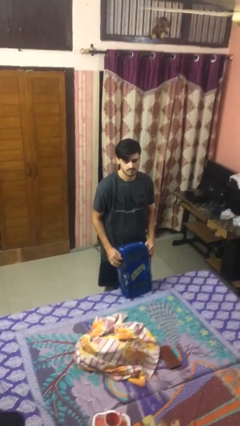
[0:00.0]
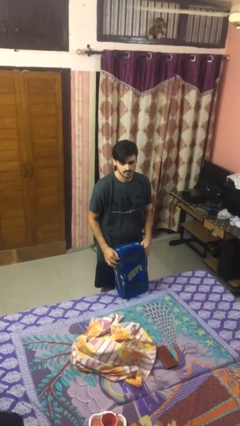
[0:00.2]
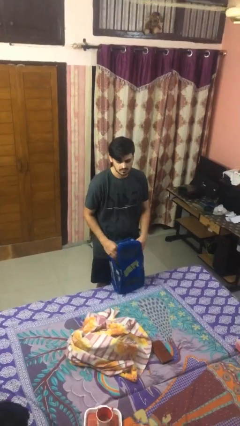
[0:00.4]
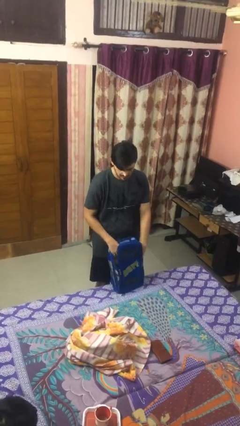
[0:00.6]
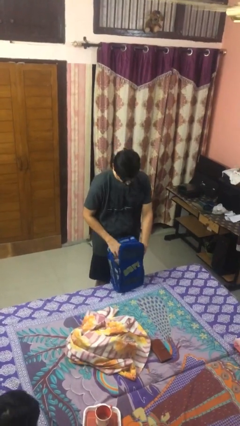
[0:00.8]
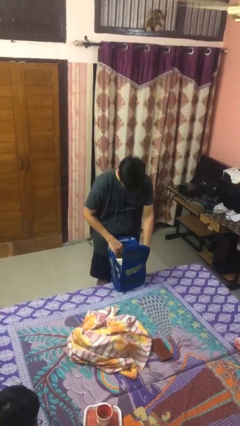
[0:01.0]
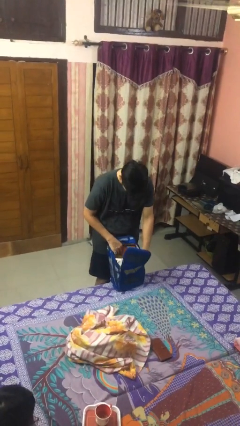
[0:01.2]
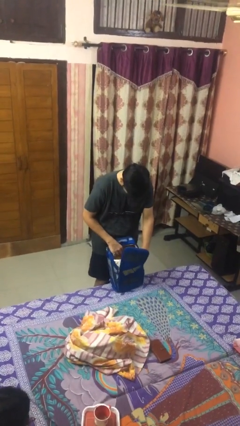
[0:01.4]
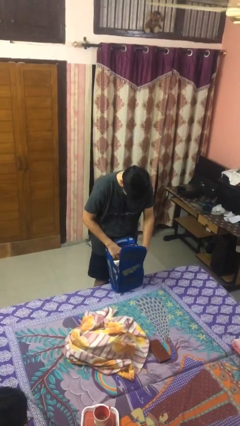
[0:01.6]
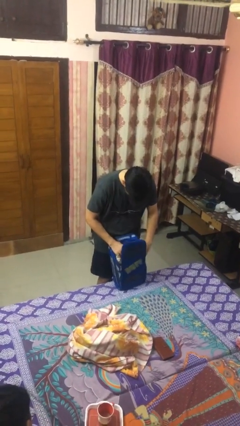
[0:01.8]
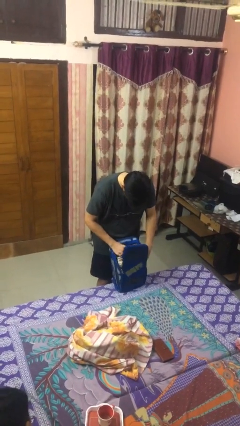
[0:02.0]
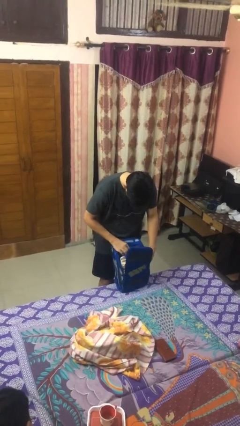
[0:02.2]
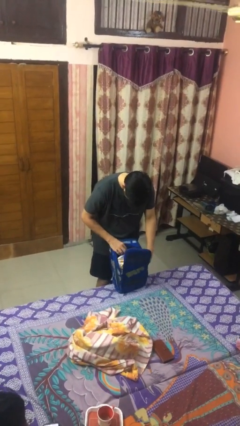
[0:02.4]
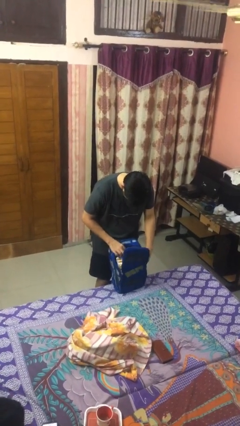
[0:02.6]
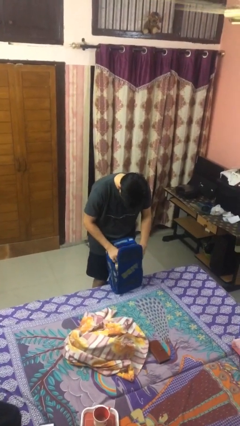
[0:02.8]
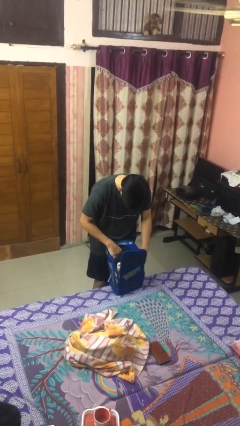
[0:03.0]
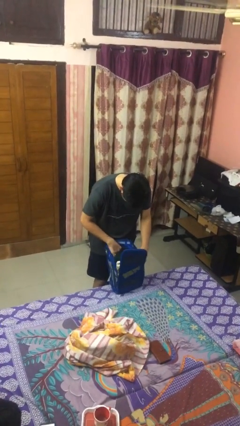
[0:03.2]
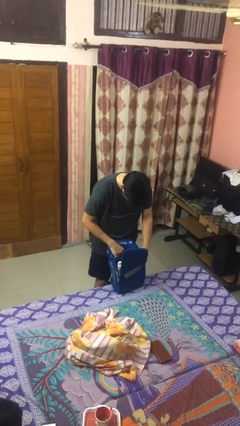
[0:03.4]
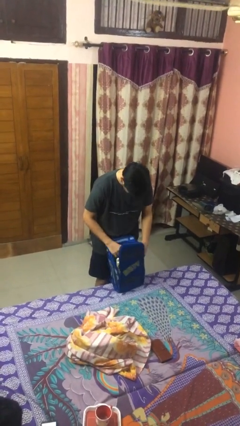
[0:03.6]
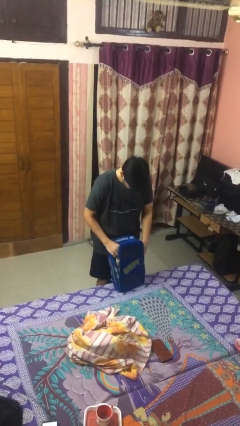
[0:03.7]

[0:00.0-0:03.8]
person searches in bag

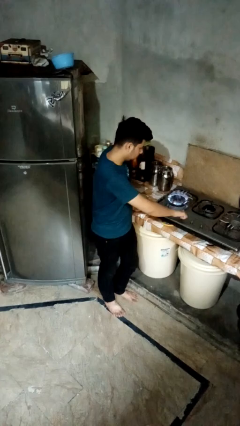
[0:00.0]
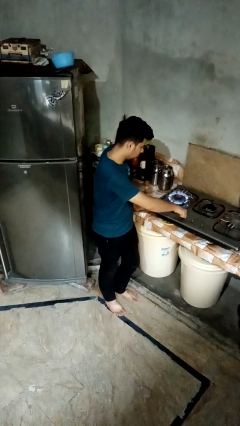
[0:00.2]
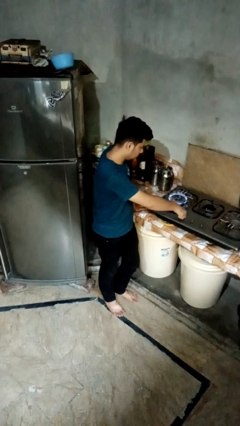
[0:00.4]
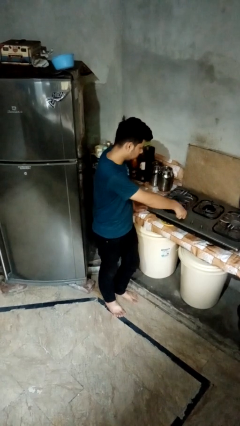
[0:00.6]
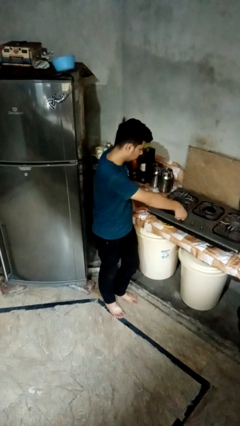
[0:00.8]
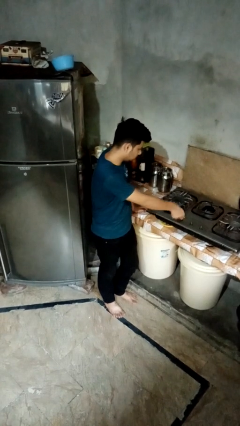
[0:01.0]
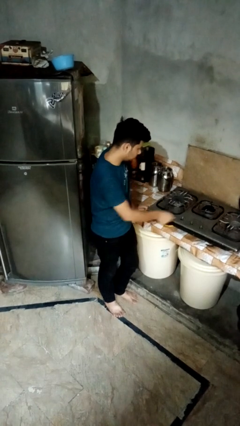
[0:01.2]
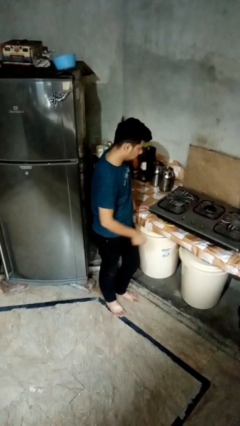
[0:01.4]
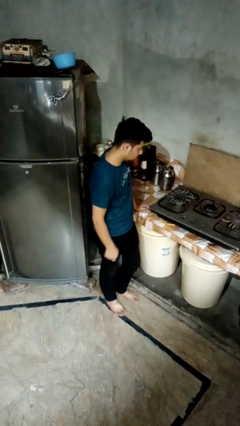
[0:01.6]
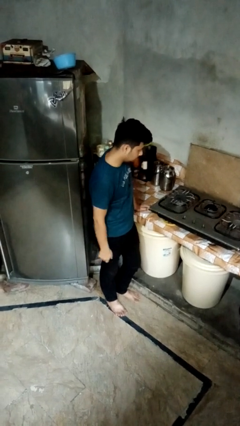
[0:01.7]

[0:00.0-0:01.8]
person turns off stovetop

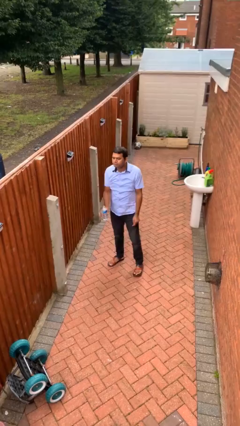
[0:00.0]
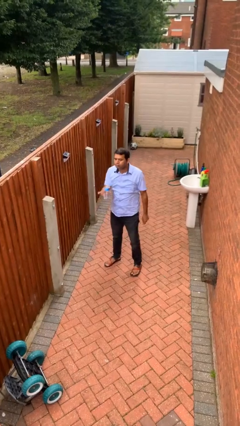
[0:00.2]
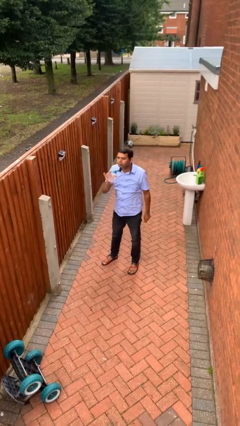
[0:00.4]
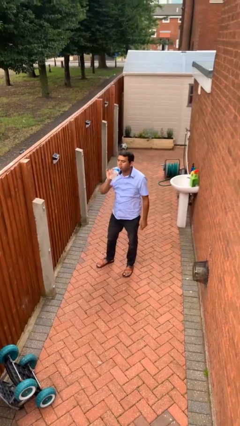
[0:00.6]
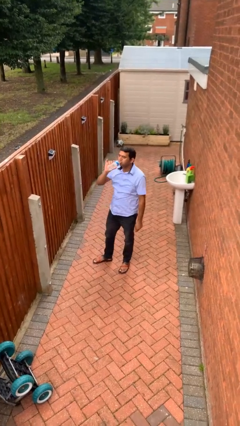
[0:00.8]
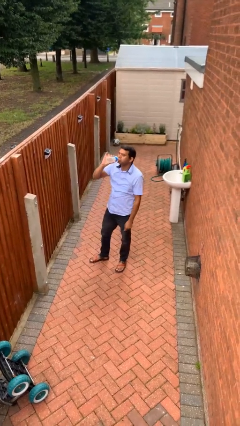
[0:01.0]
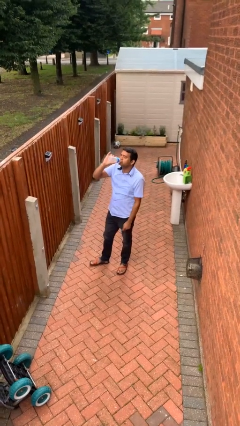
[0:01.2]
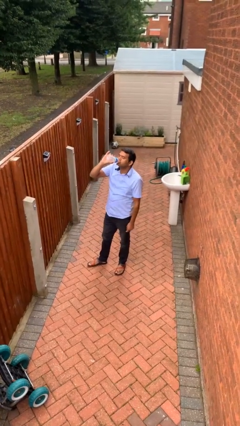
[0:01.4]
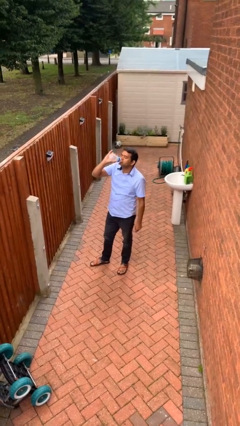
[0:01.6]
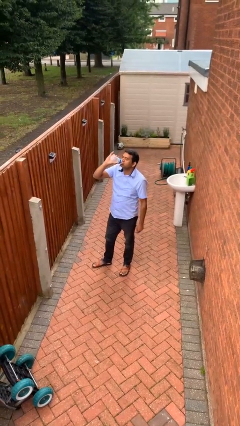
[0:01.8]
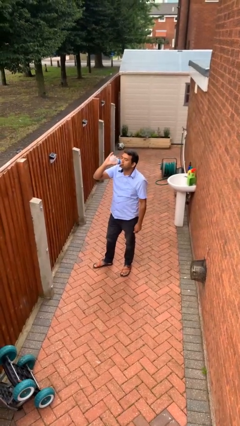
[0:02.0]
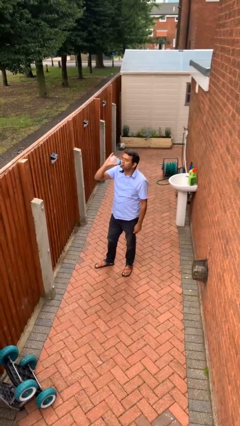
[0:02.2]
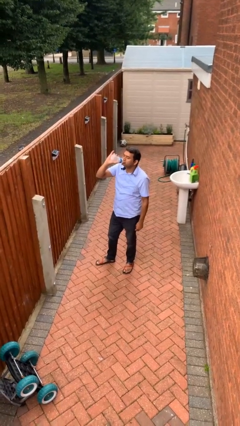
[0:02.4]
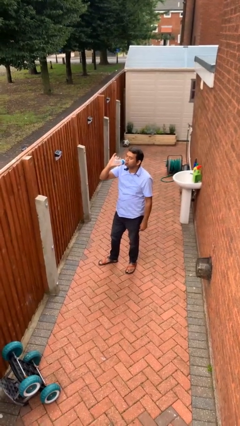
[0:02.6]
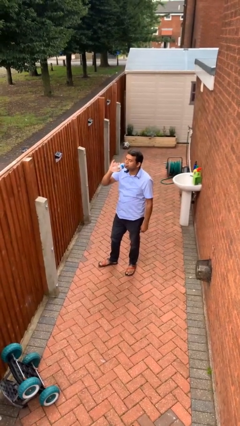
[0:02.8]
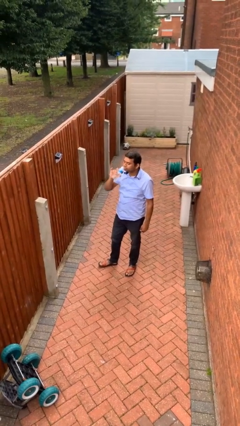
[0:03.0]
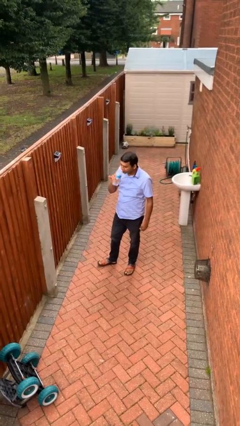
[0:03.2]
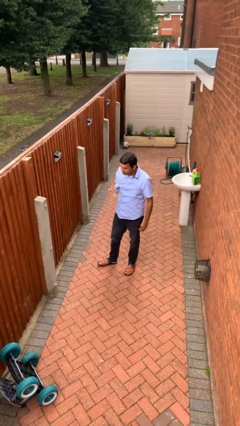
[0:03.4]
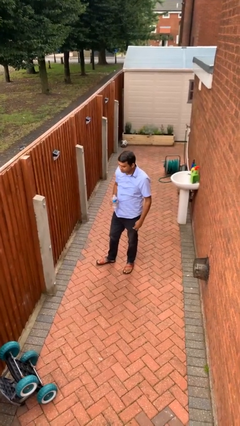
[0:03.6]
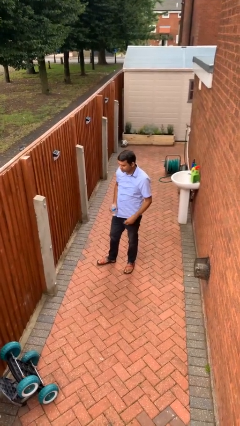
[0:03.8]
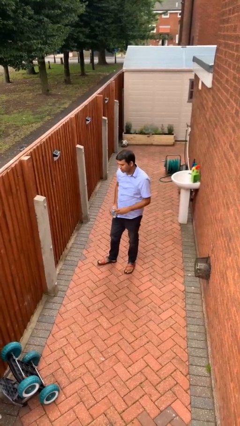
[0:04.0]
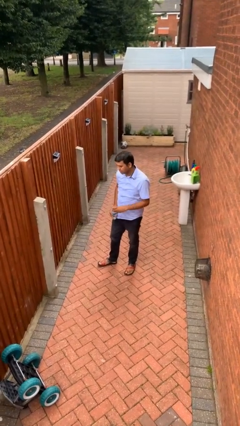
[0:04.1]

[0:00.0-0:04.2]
person drinks from bottle

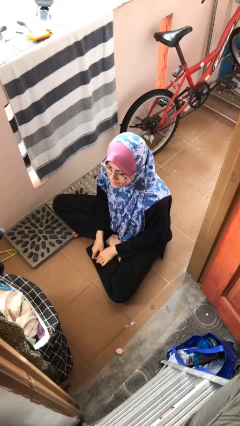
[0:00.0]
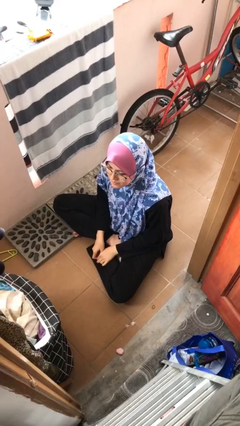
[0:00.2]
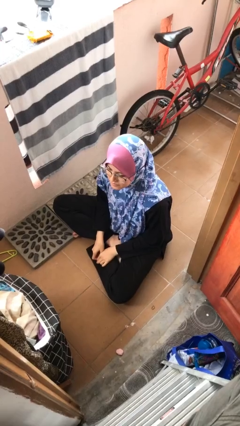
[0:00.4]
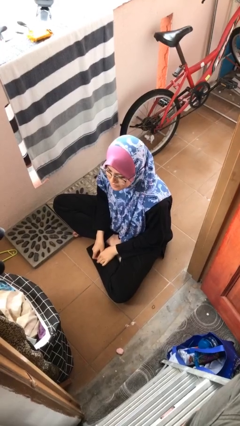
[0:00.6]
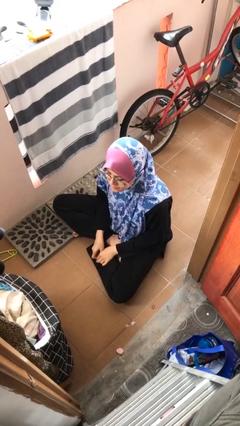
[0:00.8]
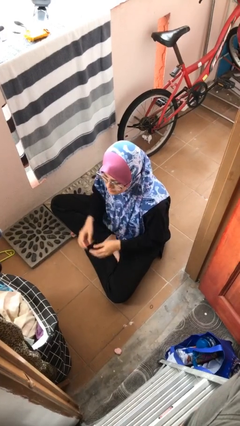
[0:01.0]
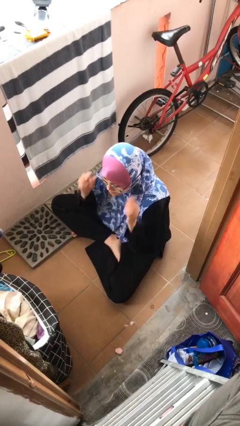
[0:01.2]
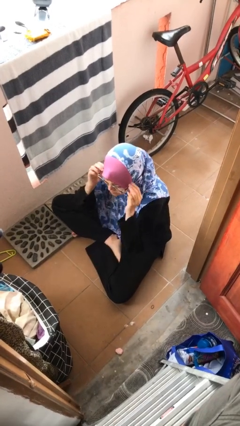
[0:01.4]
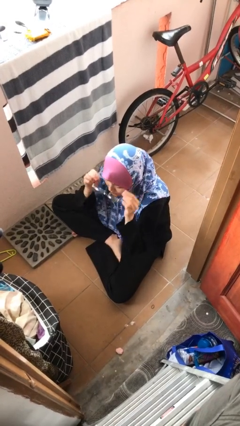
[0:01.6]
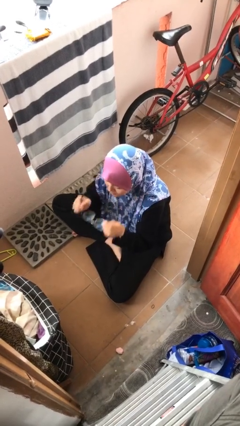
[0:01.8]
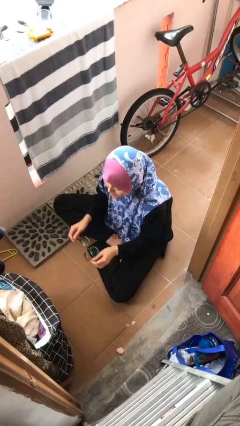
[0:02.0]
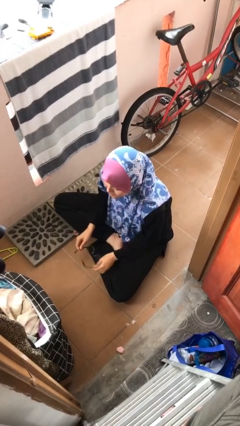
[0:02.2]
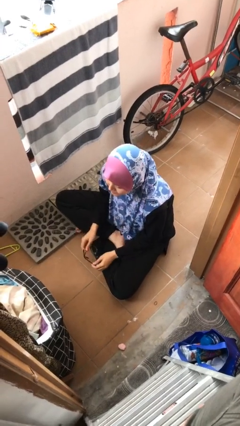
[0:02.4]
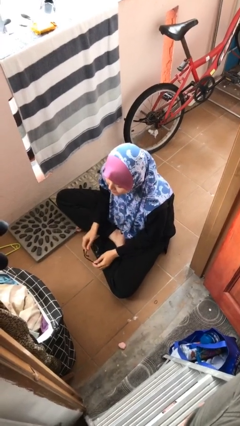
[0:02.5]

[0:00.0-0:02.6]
person takes off glasses

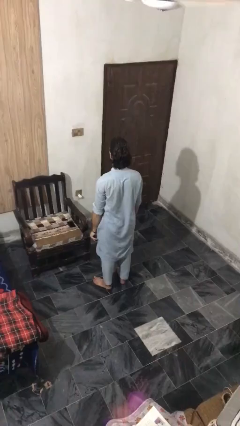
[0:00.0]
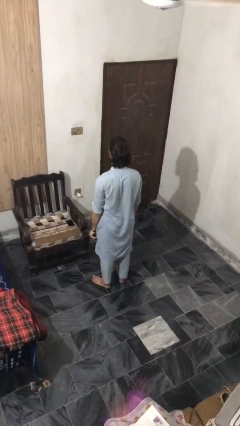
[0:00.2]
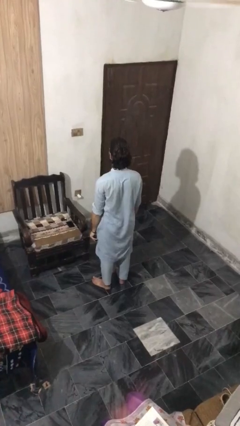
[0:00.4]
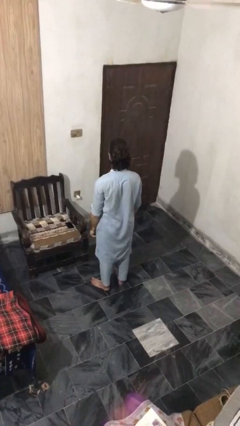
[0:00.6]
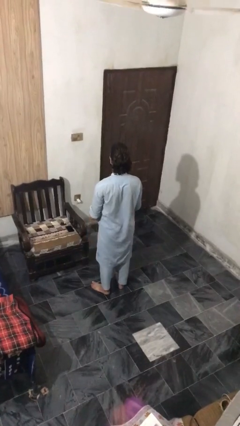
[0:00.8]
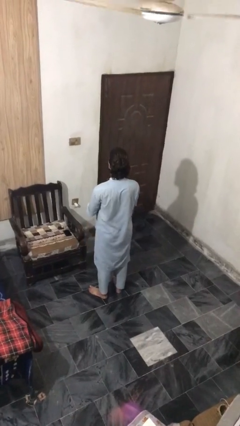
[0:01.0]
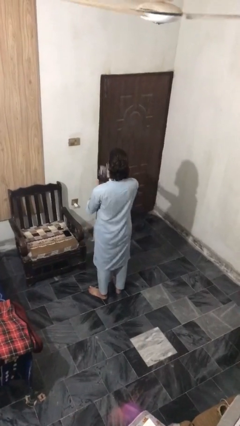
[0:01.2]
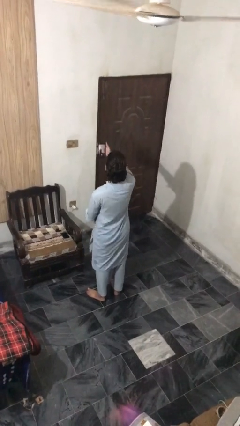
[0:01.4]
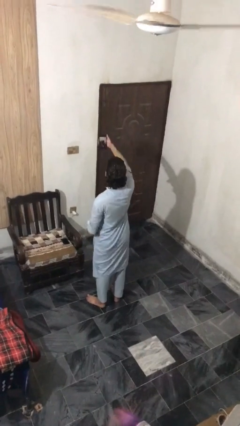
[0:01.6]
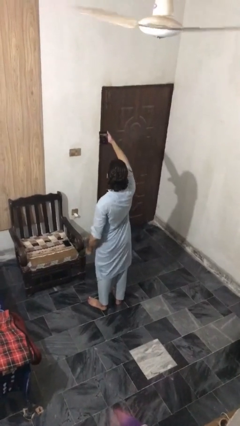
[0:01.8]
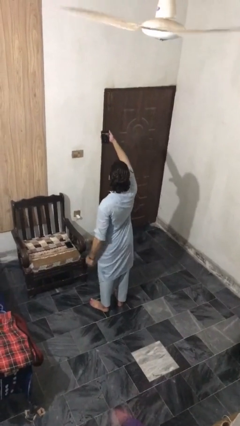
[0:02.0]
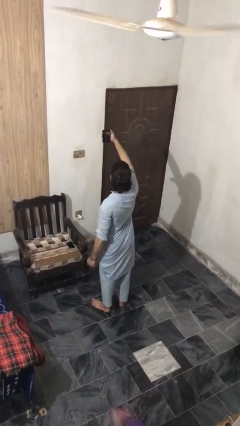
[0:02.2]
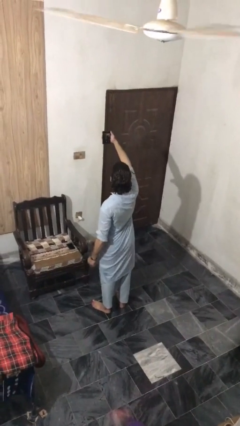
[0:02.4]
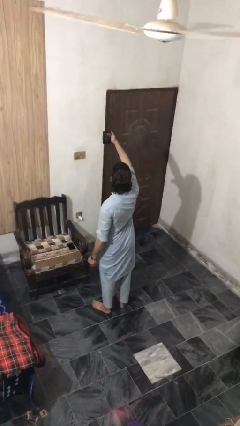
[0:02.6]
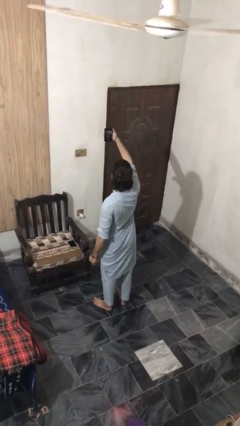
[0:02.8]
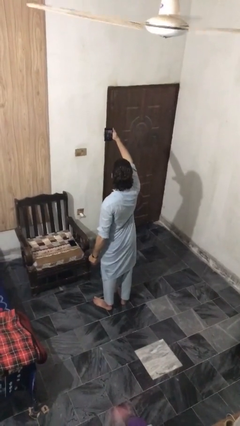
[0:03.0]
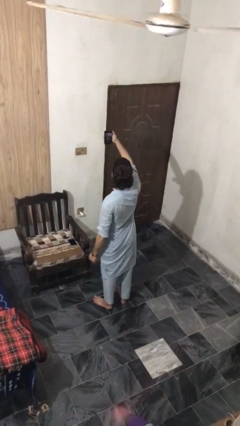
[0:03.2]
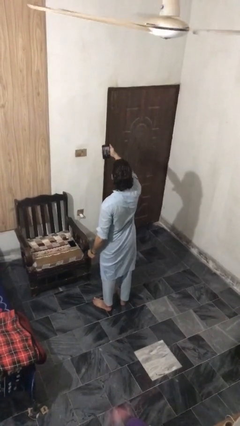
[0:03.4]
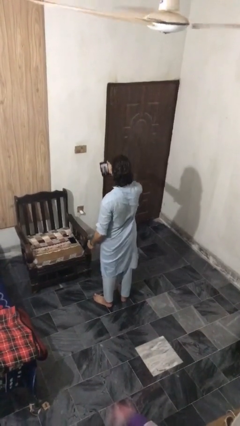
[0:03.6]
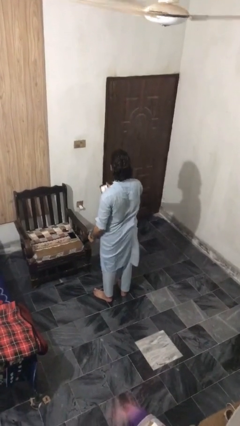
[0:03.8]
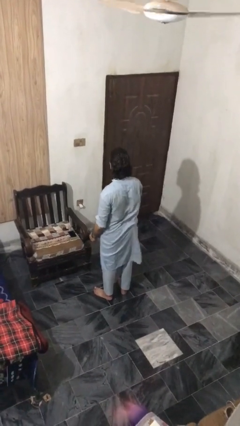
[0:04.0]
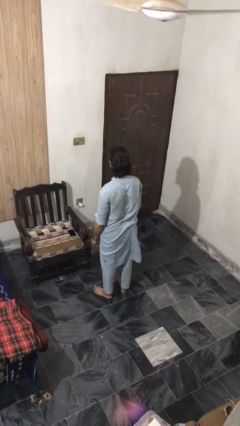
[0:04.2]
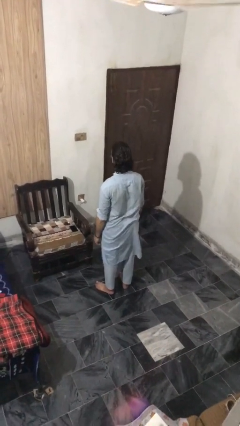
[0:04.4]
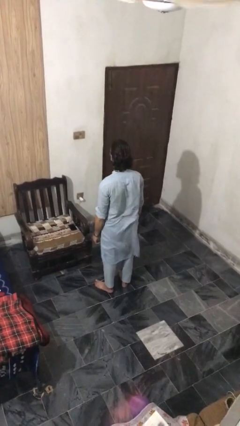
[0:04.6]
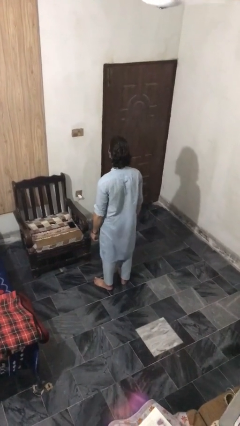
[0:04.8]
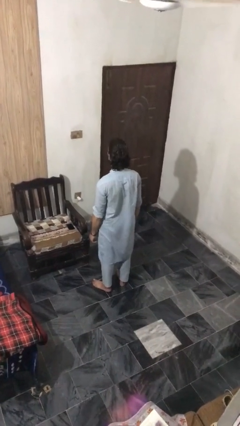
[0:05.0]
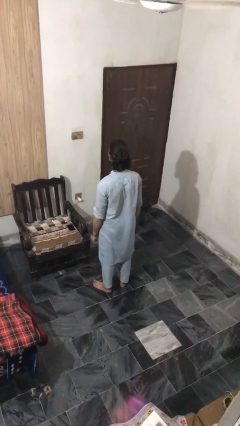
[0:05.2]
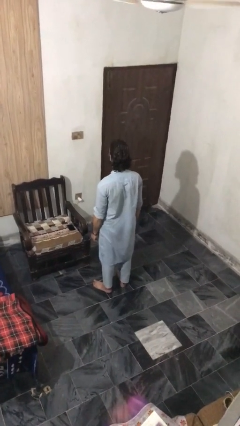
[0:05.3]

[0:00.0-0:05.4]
person takes selfie
